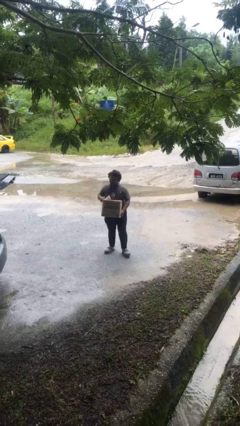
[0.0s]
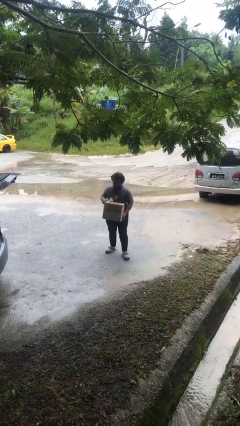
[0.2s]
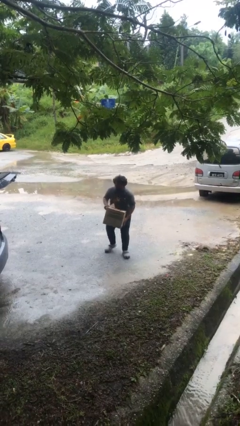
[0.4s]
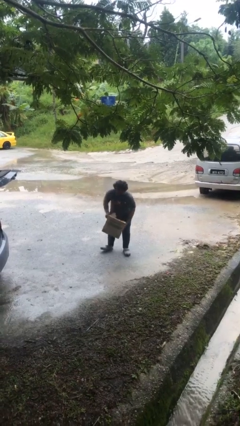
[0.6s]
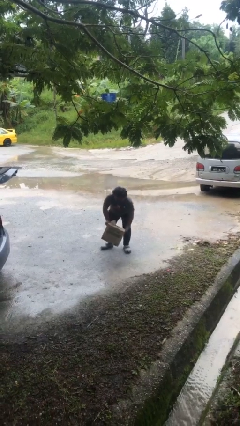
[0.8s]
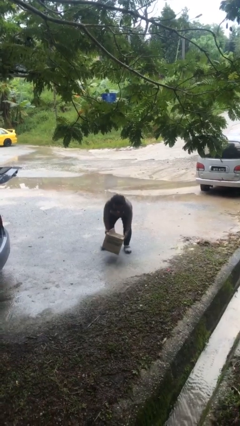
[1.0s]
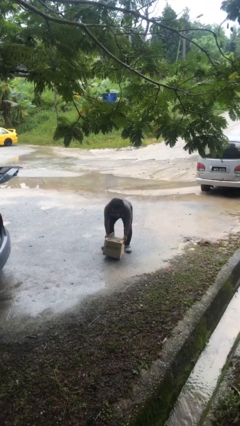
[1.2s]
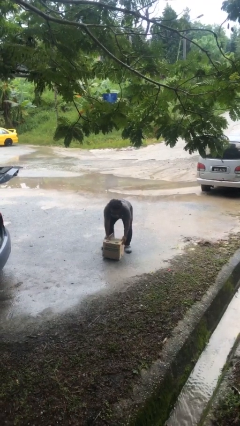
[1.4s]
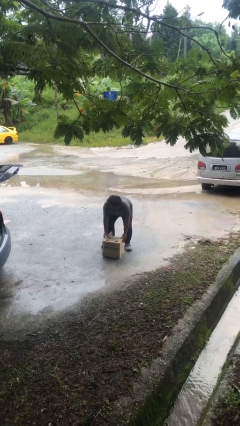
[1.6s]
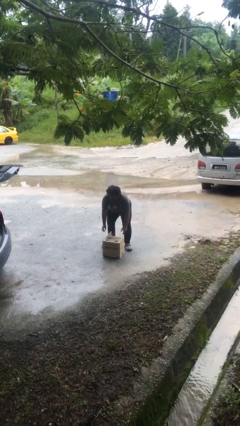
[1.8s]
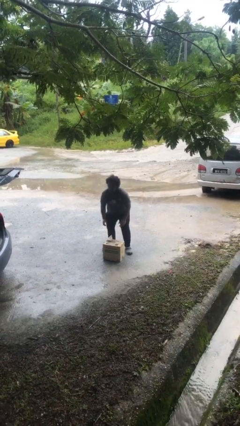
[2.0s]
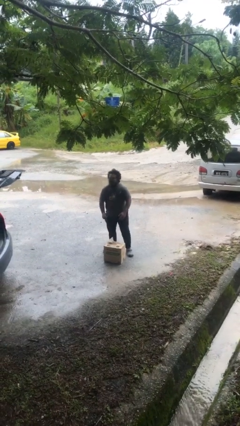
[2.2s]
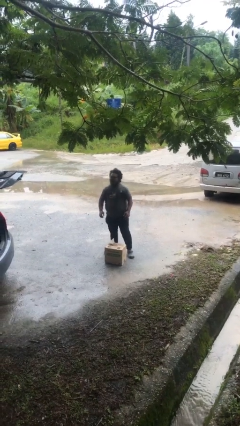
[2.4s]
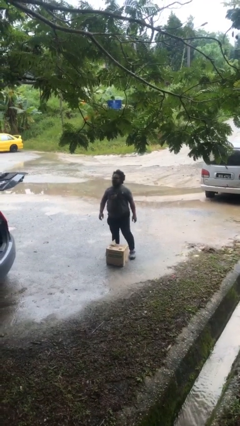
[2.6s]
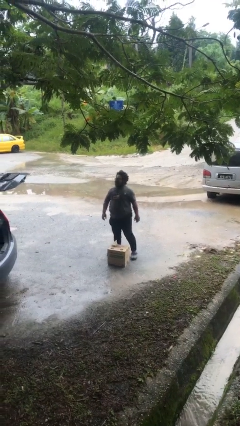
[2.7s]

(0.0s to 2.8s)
person puts down object on floor

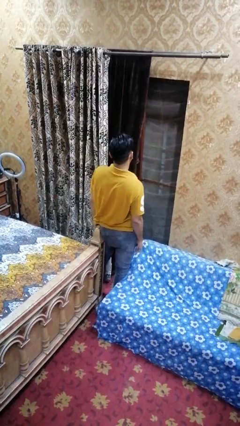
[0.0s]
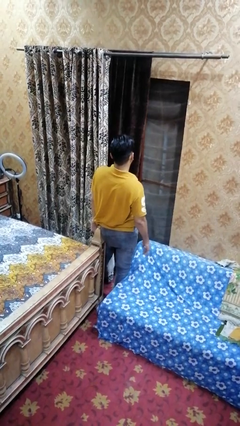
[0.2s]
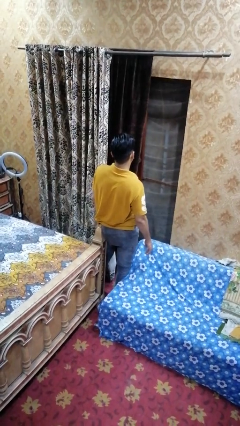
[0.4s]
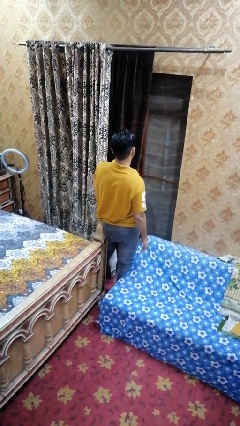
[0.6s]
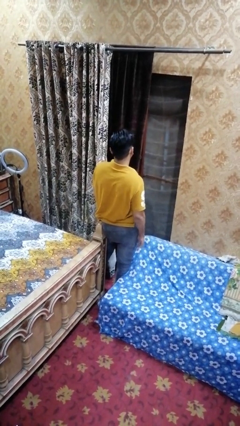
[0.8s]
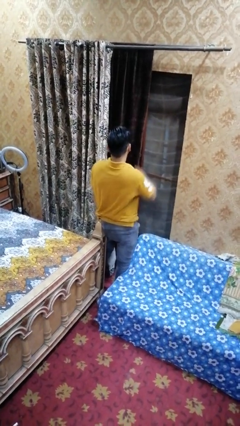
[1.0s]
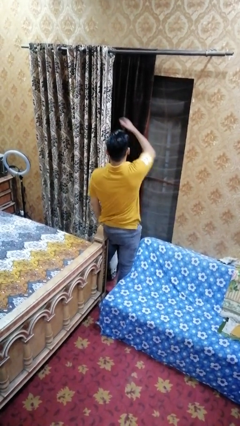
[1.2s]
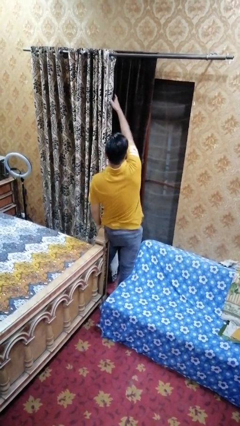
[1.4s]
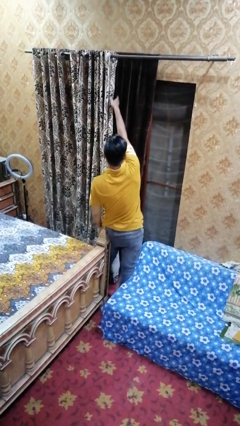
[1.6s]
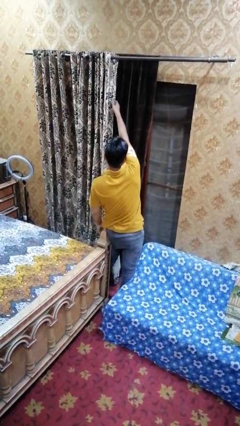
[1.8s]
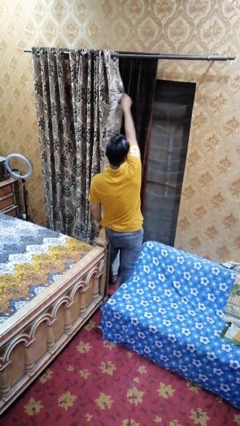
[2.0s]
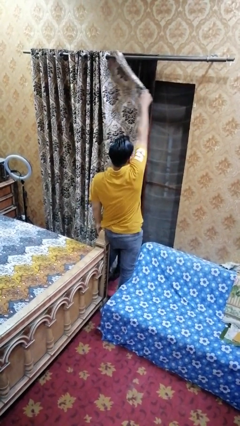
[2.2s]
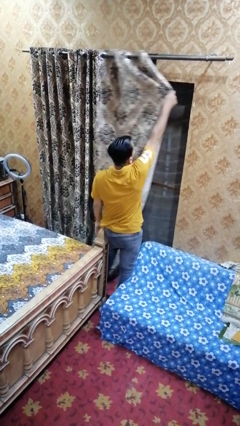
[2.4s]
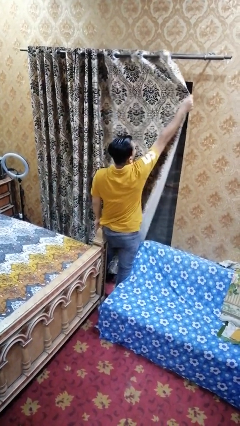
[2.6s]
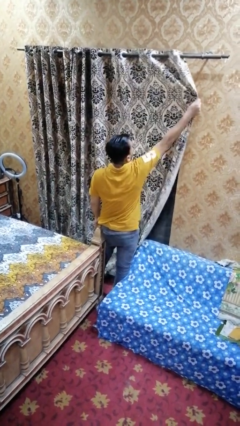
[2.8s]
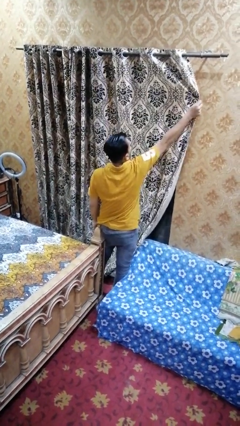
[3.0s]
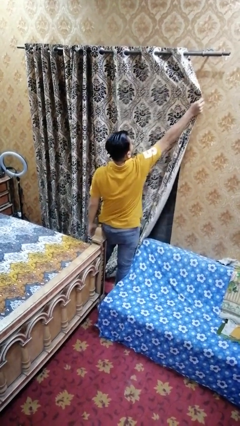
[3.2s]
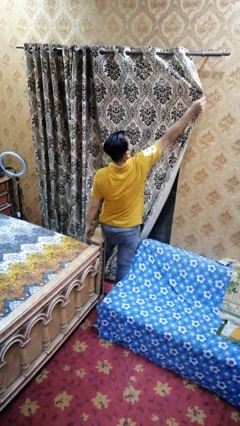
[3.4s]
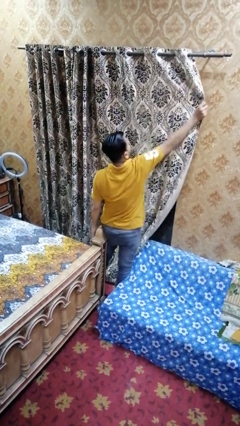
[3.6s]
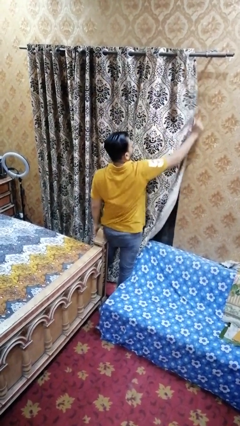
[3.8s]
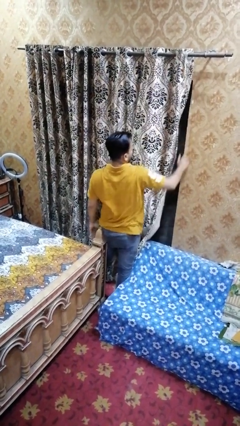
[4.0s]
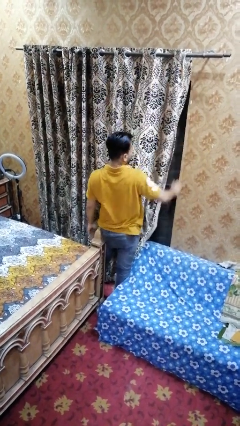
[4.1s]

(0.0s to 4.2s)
person closes curtains

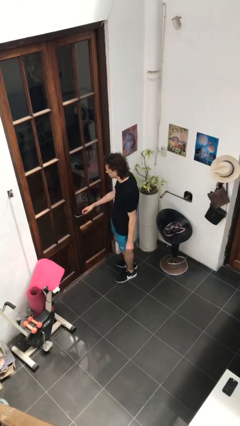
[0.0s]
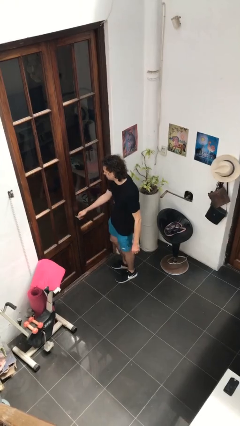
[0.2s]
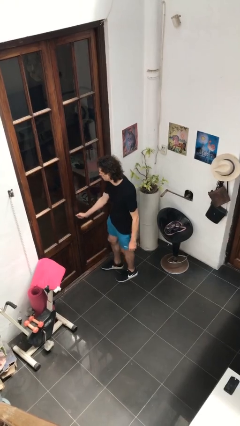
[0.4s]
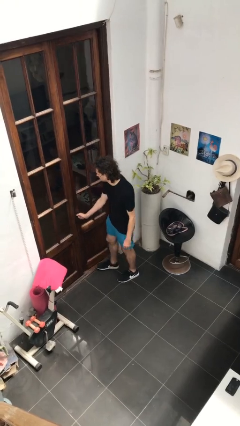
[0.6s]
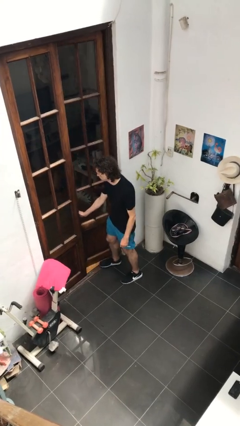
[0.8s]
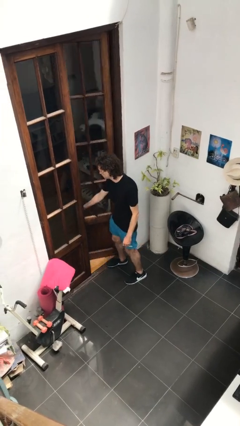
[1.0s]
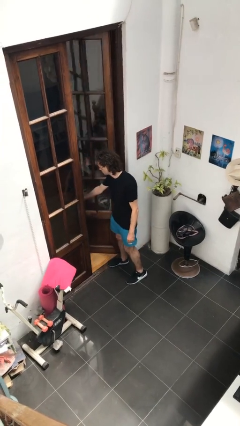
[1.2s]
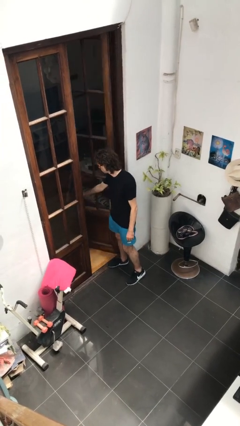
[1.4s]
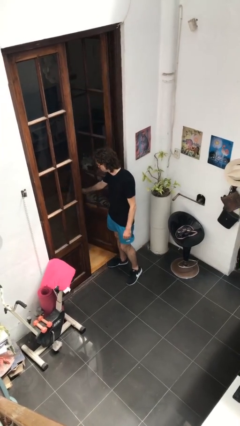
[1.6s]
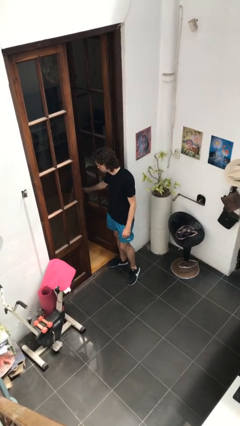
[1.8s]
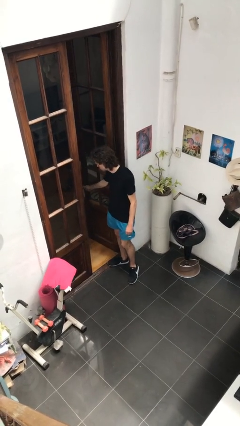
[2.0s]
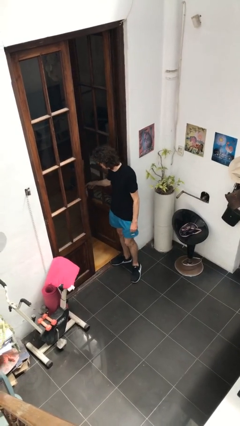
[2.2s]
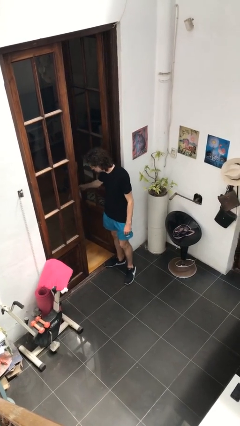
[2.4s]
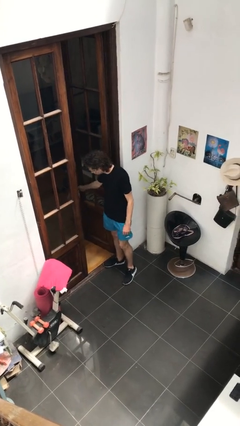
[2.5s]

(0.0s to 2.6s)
person opens facility door

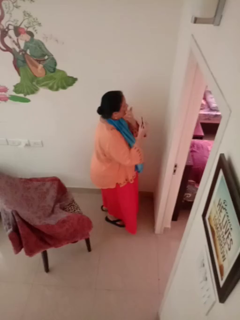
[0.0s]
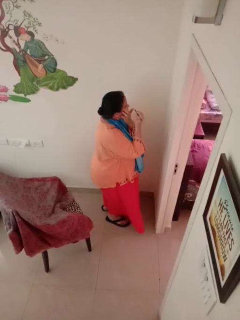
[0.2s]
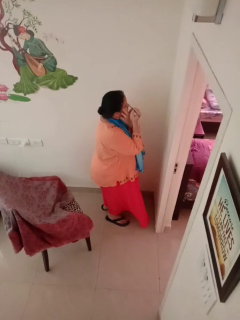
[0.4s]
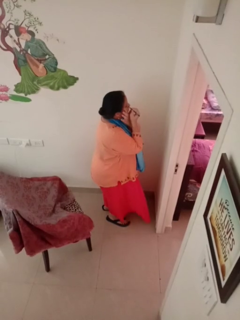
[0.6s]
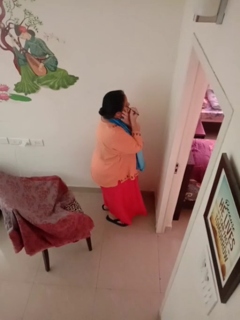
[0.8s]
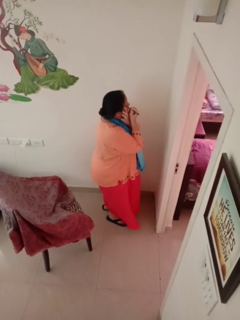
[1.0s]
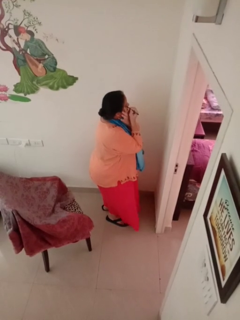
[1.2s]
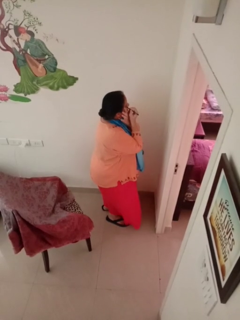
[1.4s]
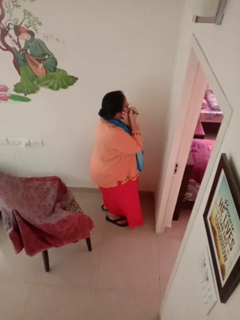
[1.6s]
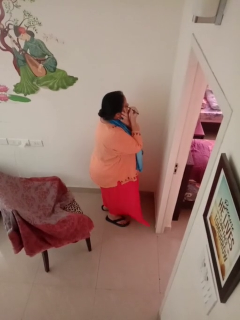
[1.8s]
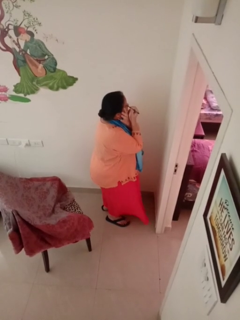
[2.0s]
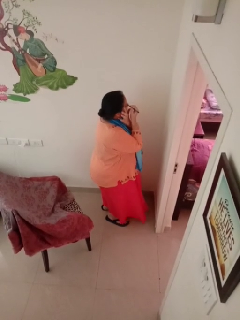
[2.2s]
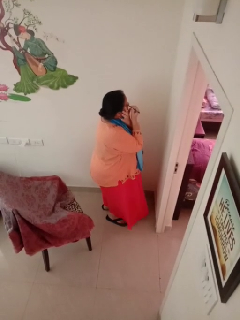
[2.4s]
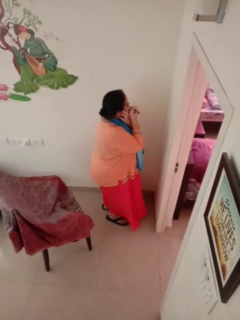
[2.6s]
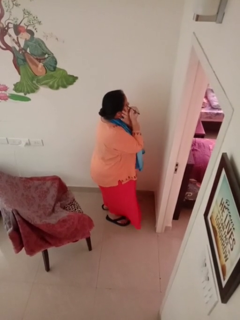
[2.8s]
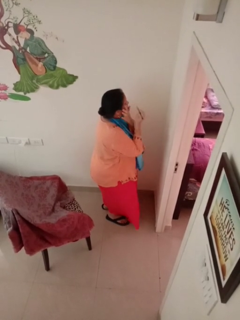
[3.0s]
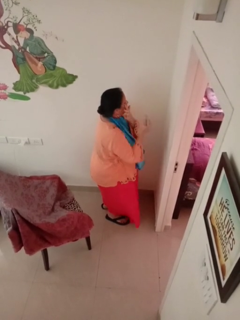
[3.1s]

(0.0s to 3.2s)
person applies eye makeup

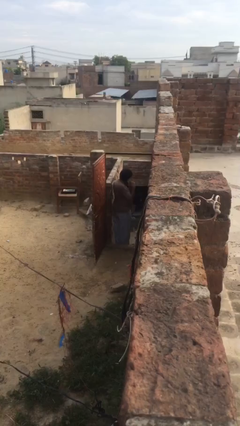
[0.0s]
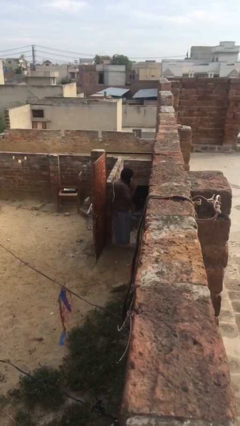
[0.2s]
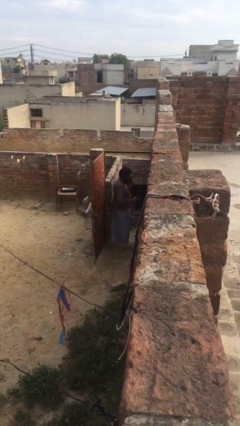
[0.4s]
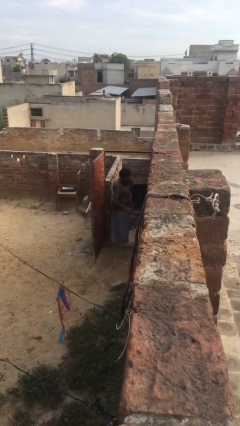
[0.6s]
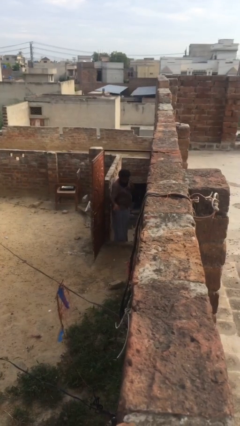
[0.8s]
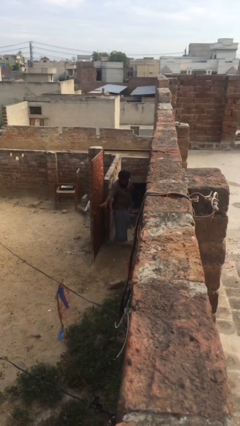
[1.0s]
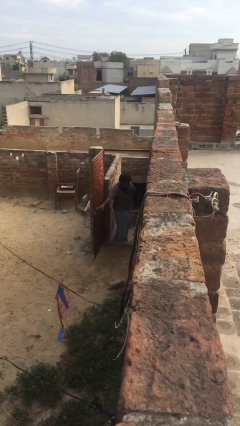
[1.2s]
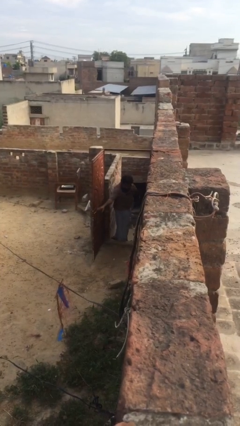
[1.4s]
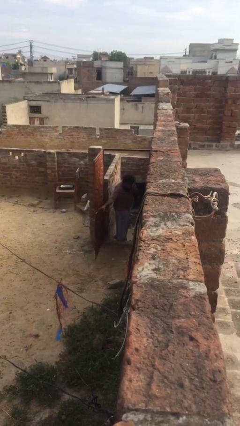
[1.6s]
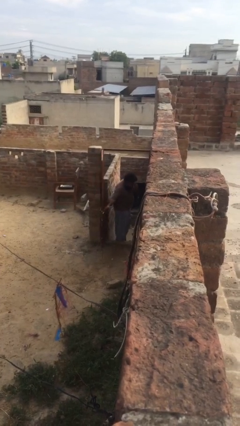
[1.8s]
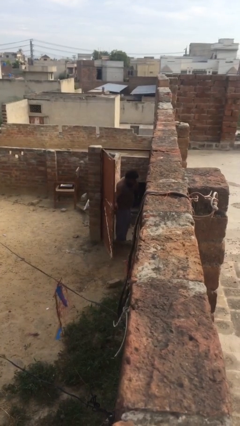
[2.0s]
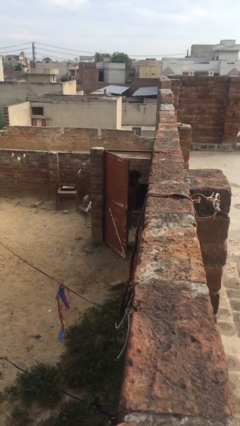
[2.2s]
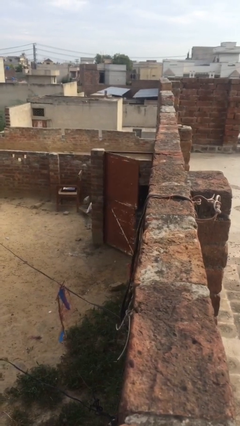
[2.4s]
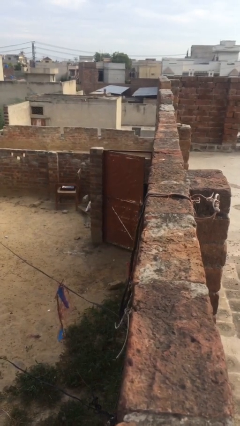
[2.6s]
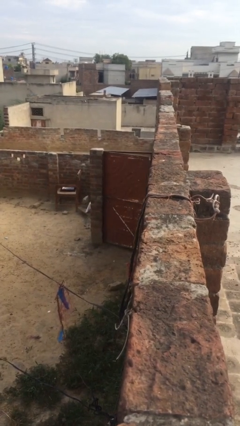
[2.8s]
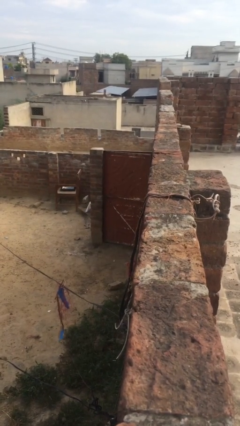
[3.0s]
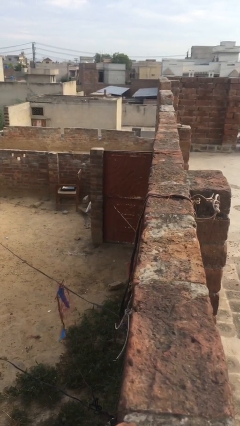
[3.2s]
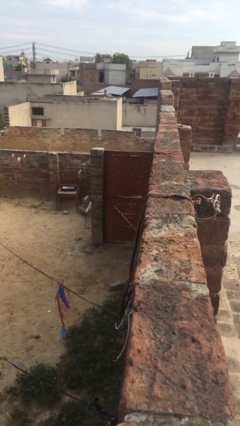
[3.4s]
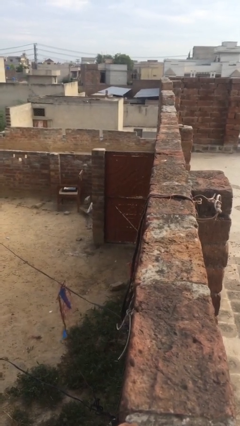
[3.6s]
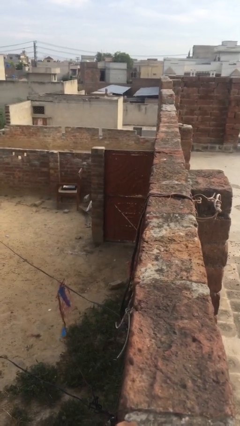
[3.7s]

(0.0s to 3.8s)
person closes facility door

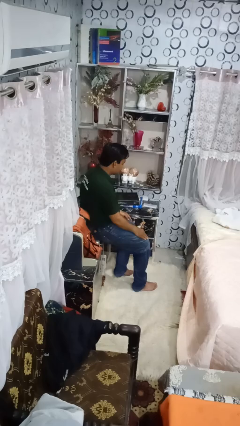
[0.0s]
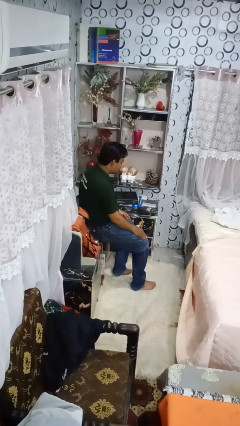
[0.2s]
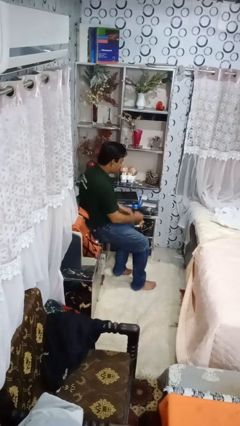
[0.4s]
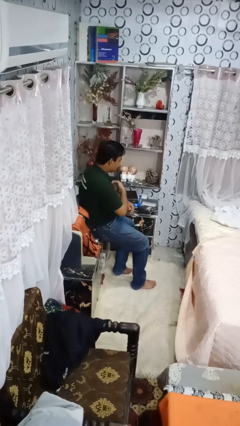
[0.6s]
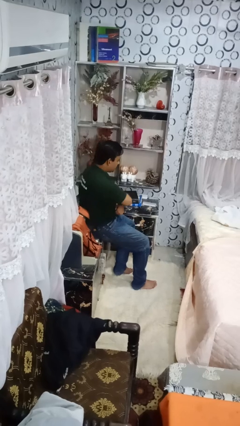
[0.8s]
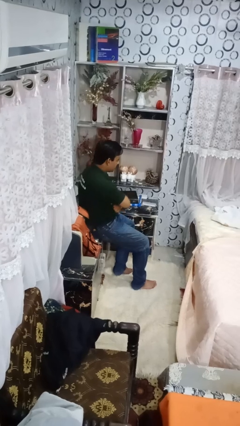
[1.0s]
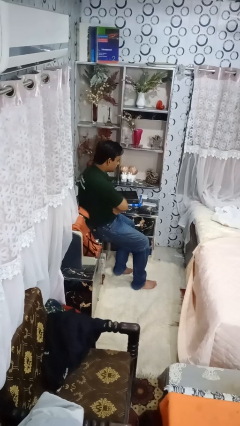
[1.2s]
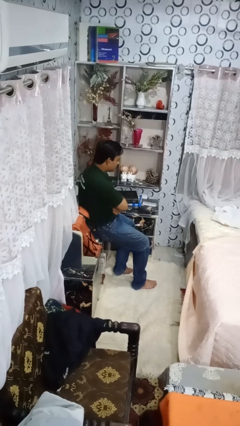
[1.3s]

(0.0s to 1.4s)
person crosses arms

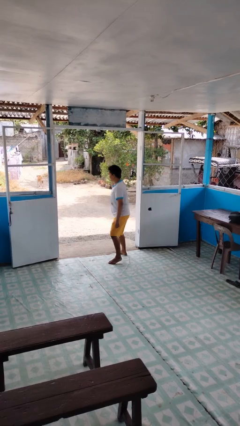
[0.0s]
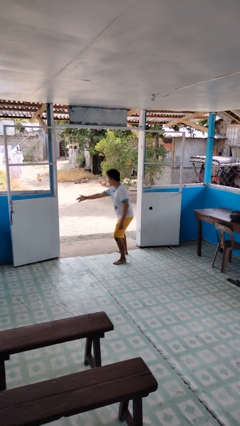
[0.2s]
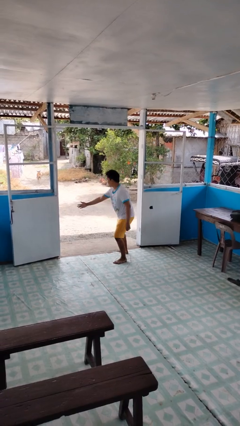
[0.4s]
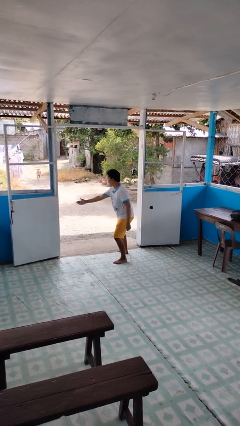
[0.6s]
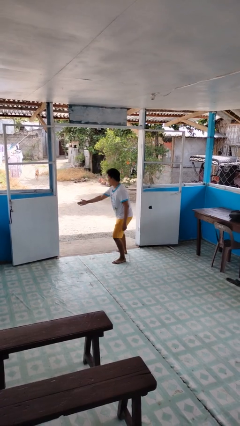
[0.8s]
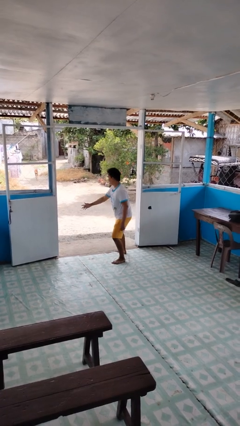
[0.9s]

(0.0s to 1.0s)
person karate chop
